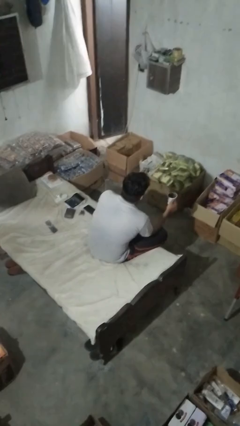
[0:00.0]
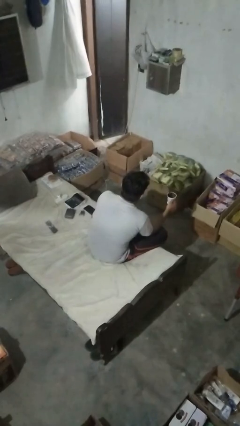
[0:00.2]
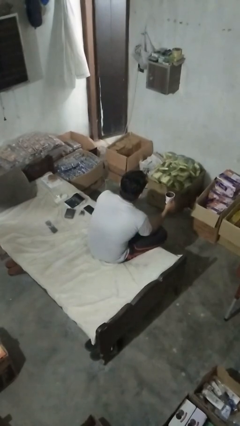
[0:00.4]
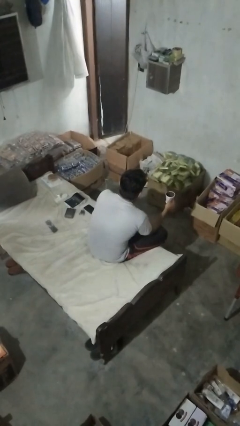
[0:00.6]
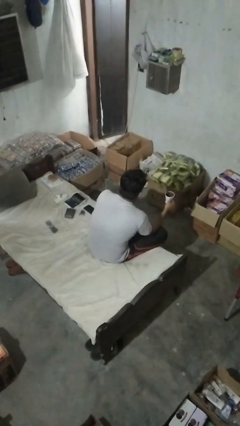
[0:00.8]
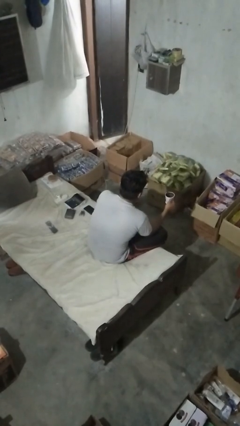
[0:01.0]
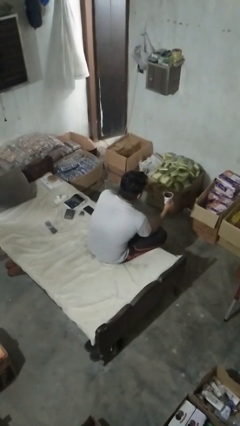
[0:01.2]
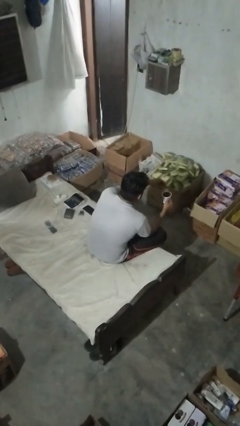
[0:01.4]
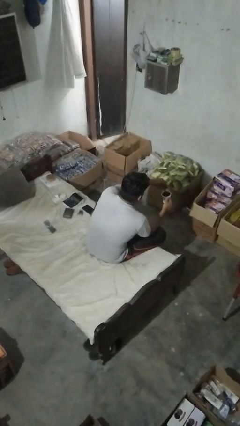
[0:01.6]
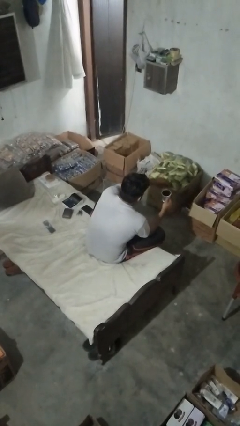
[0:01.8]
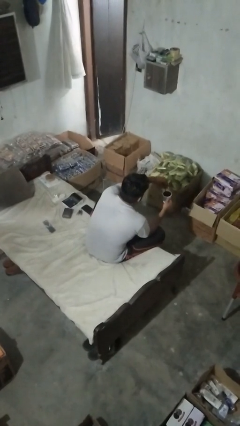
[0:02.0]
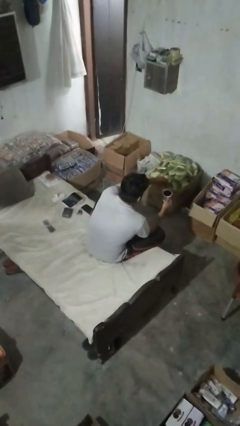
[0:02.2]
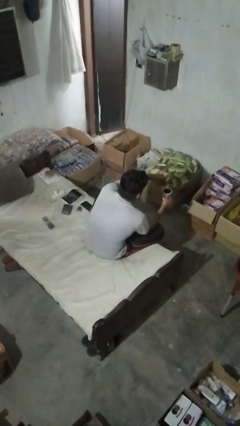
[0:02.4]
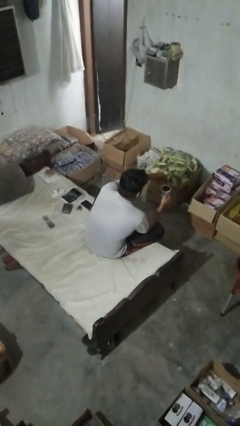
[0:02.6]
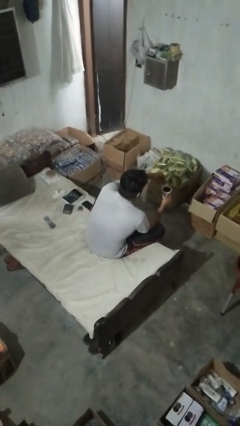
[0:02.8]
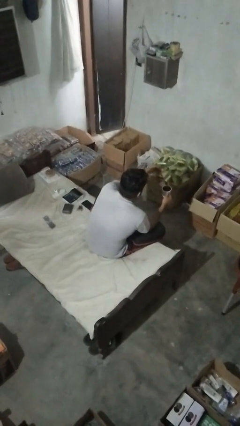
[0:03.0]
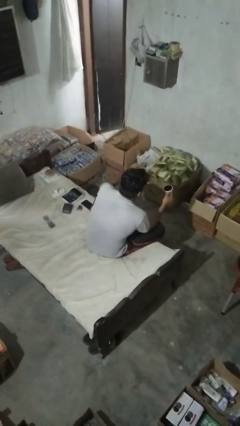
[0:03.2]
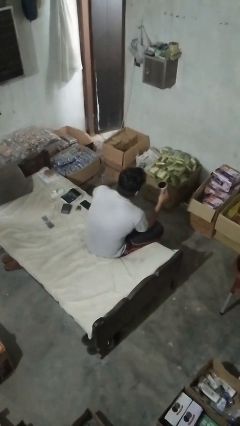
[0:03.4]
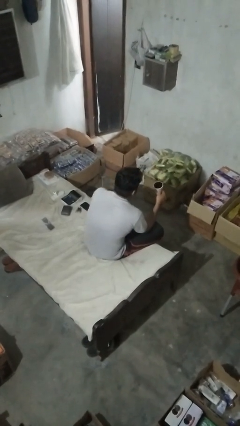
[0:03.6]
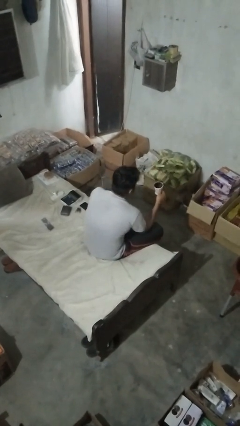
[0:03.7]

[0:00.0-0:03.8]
person stirs mug

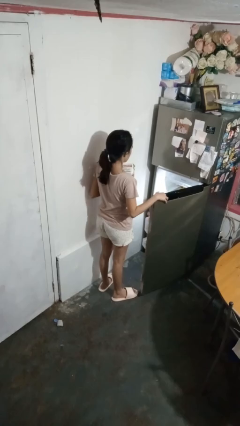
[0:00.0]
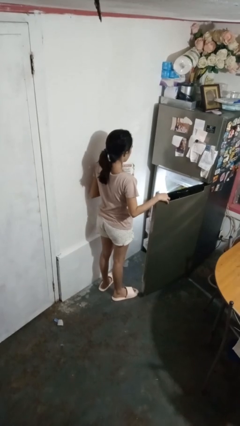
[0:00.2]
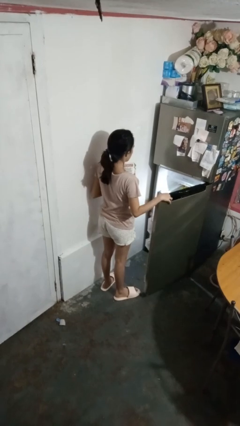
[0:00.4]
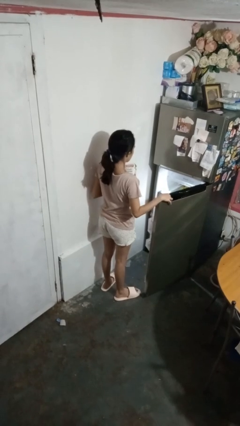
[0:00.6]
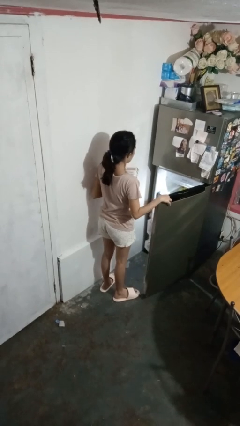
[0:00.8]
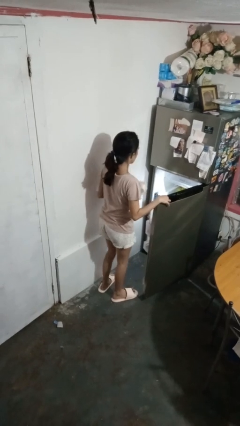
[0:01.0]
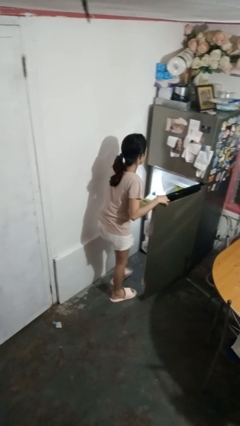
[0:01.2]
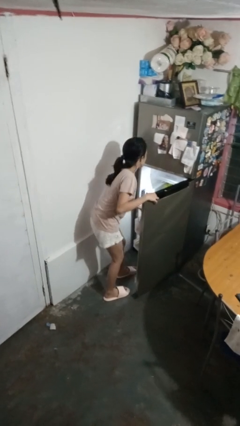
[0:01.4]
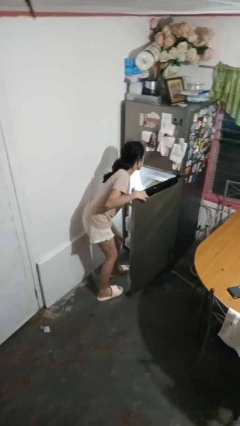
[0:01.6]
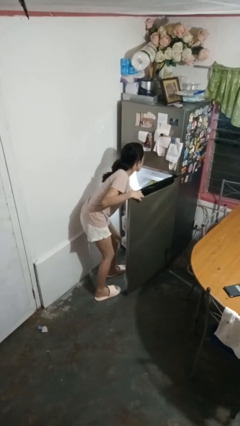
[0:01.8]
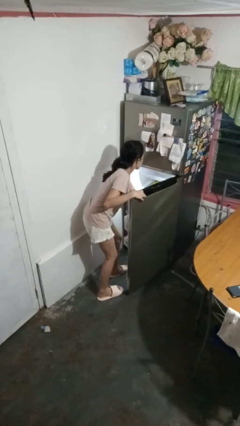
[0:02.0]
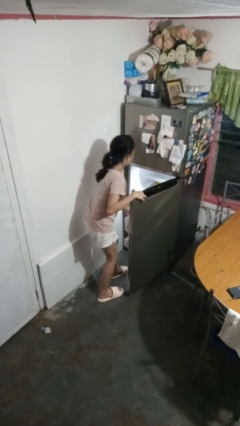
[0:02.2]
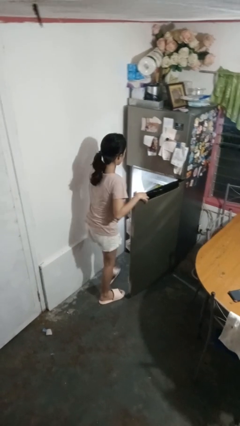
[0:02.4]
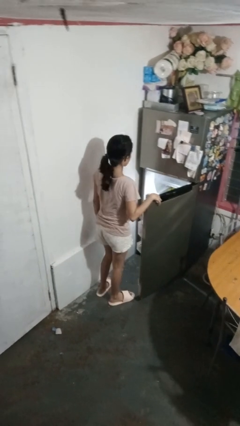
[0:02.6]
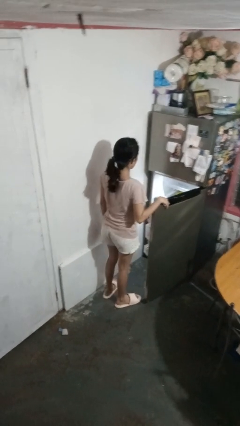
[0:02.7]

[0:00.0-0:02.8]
person puts object into refrigerator

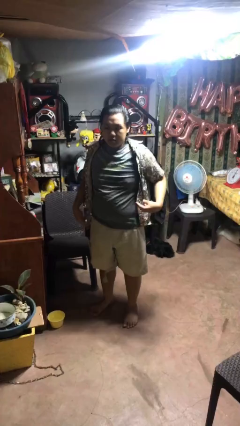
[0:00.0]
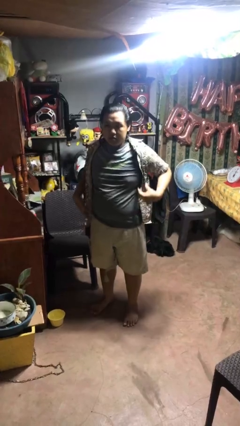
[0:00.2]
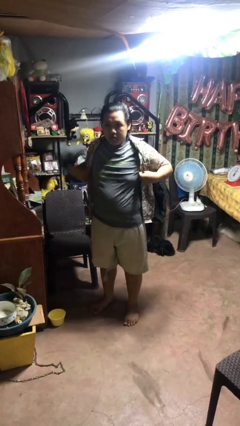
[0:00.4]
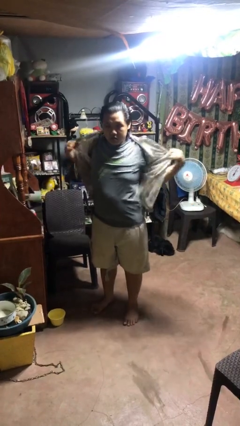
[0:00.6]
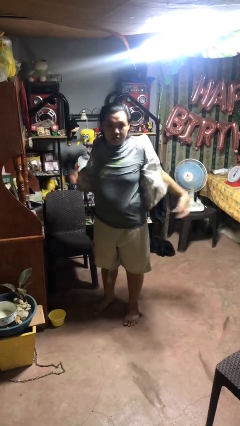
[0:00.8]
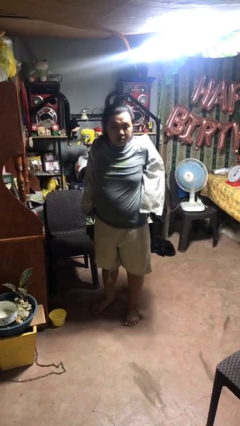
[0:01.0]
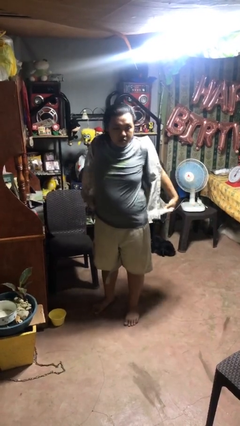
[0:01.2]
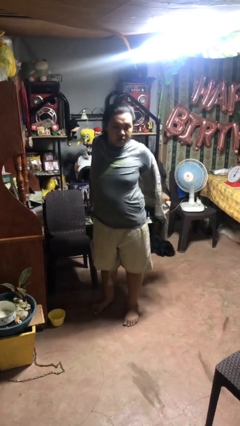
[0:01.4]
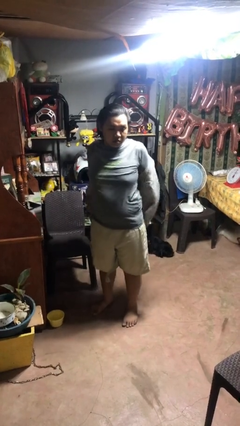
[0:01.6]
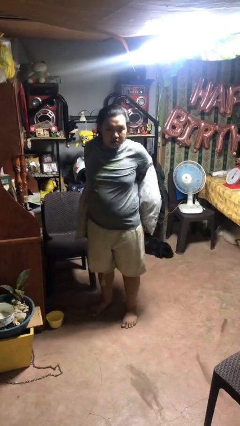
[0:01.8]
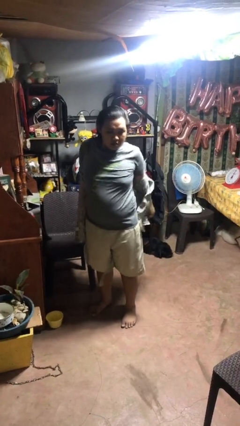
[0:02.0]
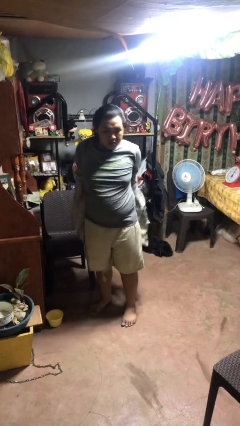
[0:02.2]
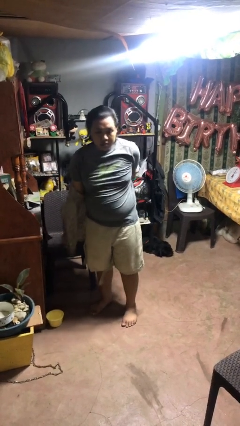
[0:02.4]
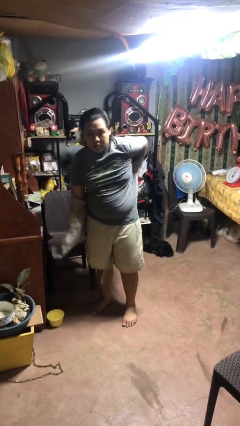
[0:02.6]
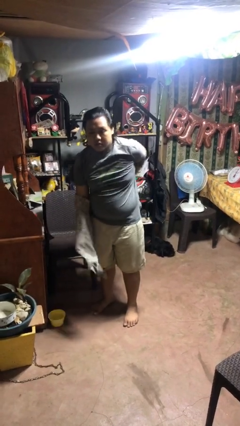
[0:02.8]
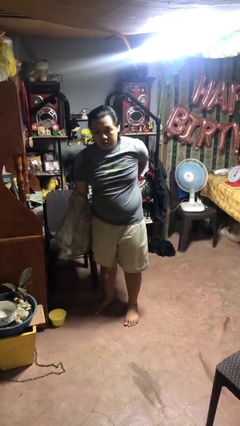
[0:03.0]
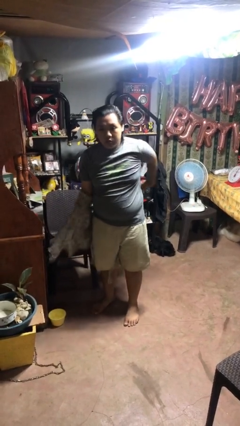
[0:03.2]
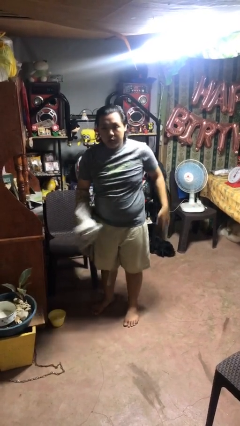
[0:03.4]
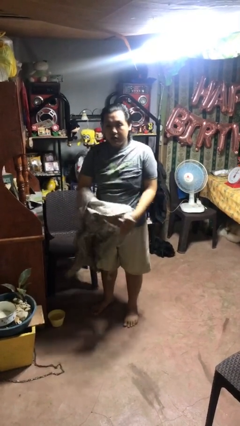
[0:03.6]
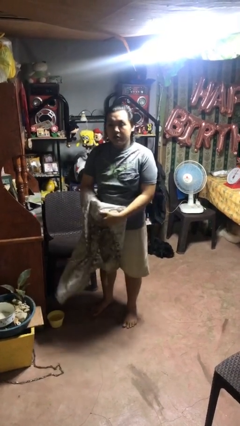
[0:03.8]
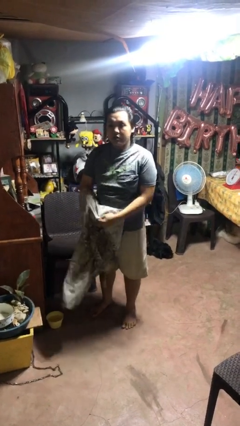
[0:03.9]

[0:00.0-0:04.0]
person takes off shirt

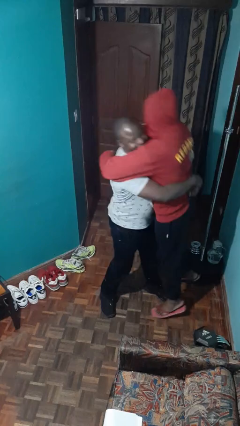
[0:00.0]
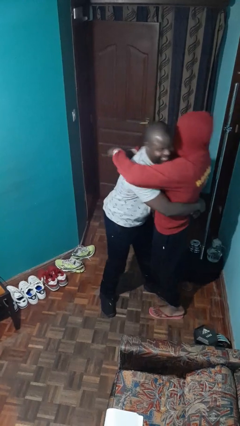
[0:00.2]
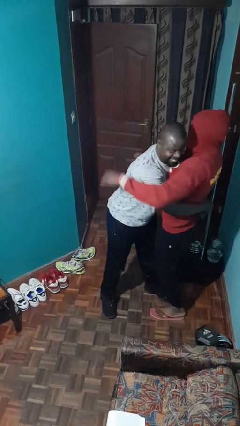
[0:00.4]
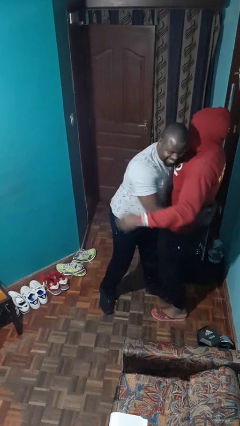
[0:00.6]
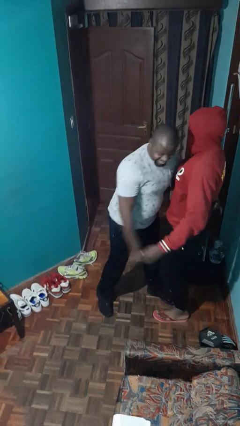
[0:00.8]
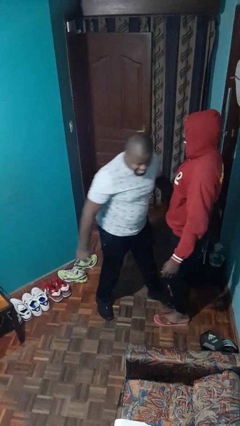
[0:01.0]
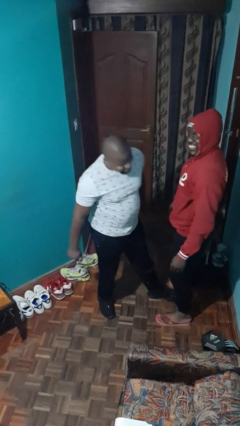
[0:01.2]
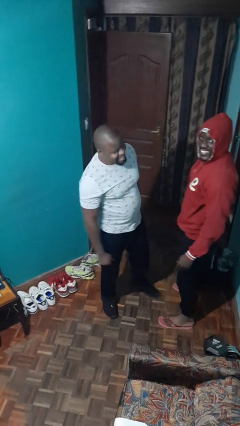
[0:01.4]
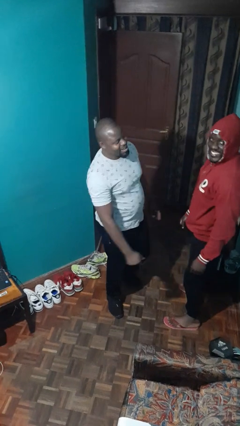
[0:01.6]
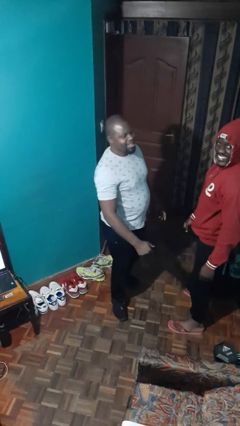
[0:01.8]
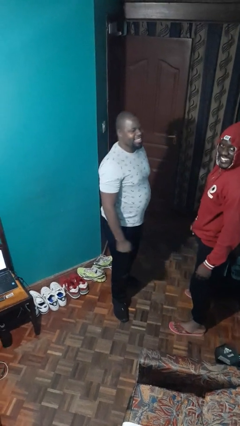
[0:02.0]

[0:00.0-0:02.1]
person puts down person

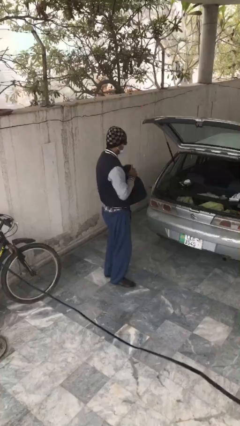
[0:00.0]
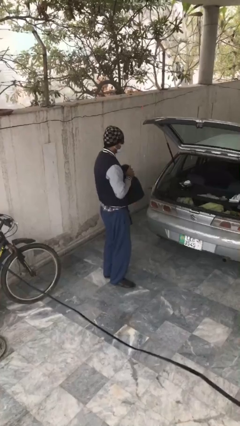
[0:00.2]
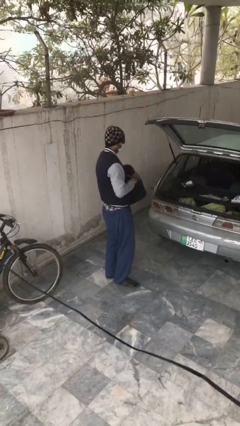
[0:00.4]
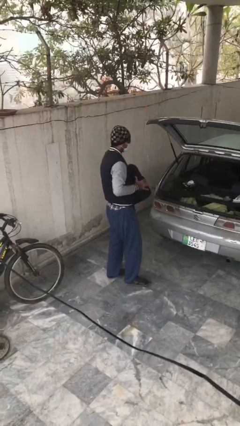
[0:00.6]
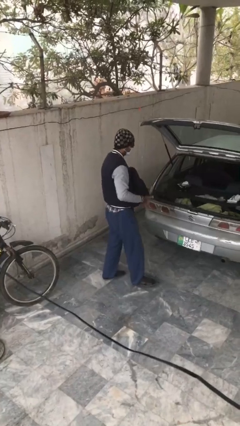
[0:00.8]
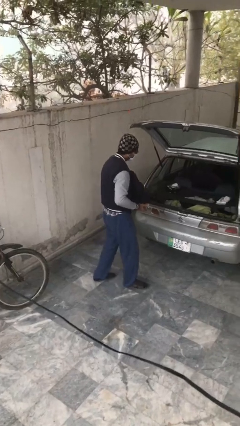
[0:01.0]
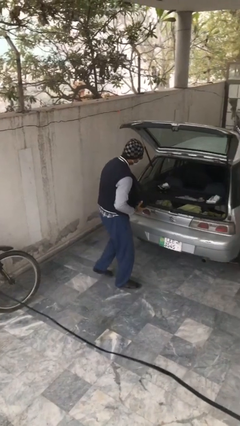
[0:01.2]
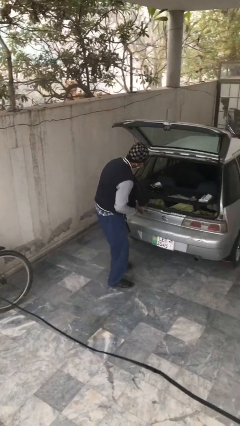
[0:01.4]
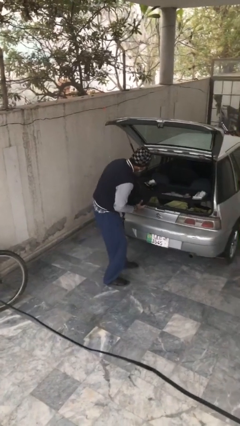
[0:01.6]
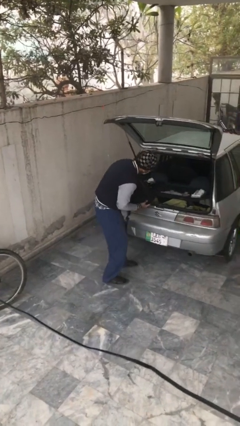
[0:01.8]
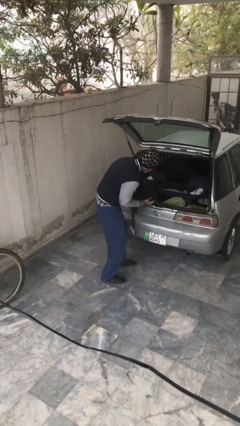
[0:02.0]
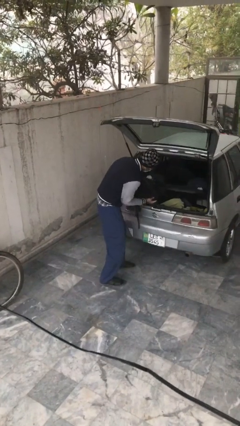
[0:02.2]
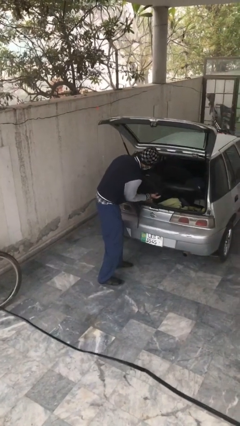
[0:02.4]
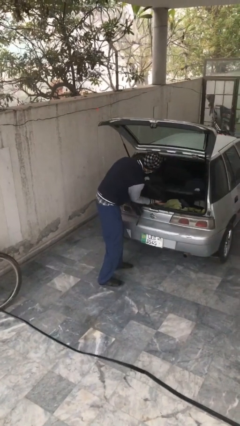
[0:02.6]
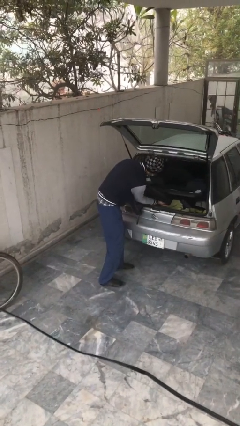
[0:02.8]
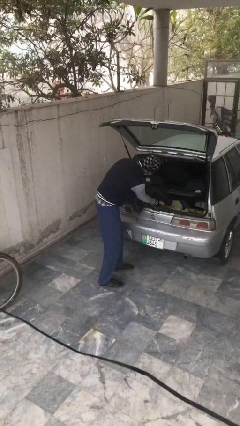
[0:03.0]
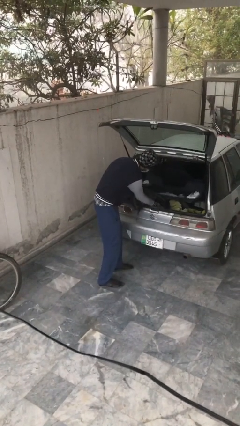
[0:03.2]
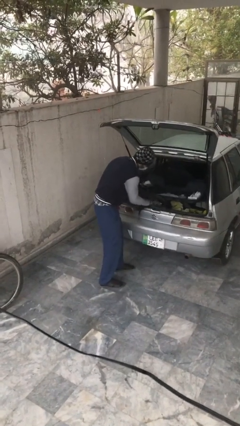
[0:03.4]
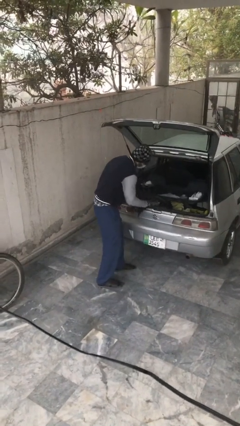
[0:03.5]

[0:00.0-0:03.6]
person loads car

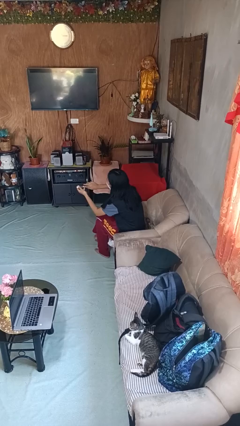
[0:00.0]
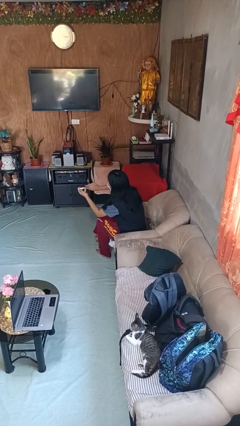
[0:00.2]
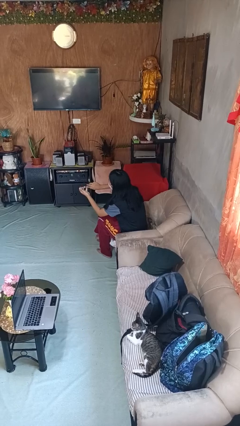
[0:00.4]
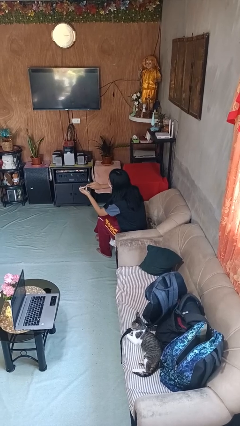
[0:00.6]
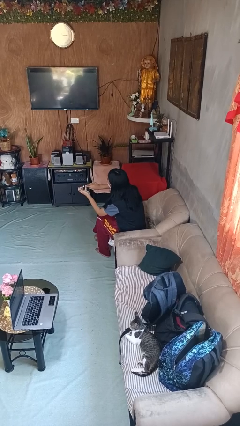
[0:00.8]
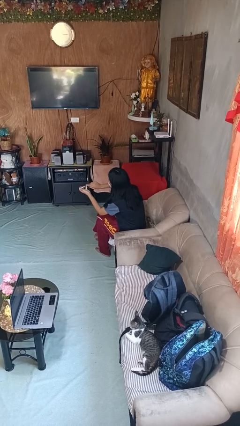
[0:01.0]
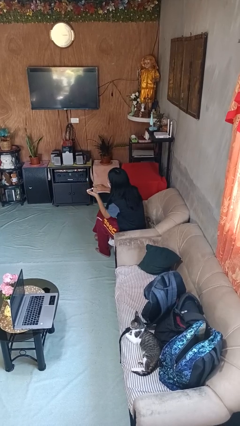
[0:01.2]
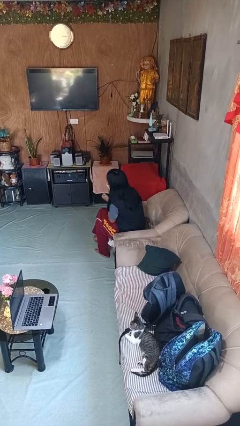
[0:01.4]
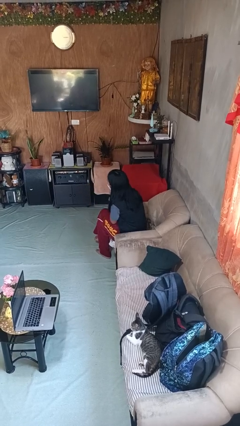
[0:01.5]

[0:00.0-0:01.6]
person clips fingernails
